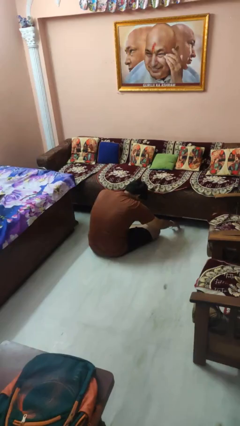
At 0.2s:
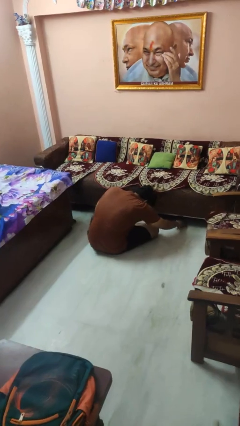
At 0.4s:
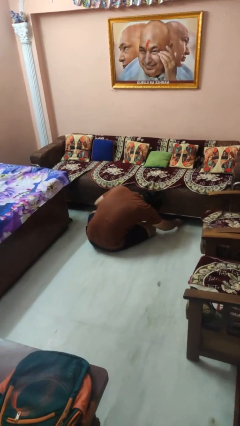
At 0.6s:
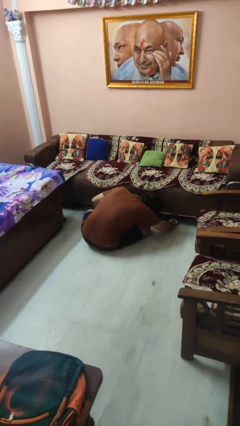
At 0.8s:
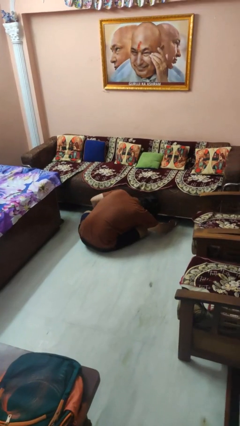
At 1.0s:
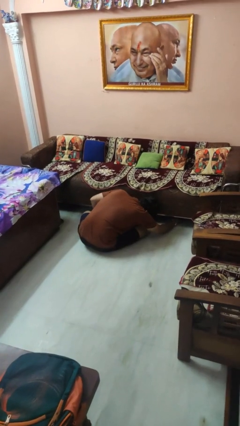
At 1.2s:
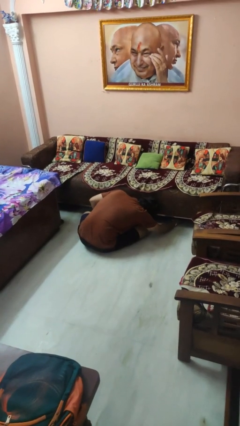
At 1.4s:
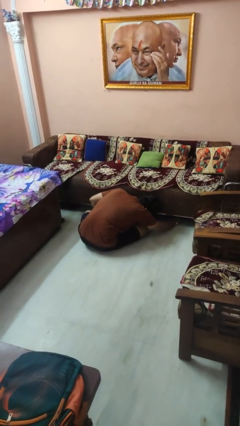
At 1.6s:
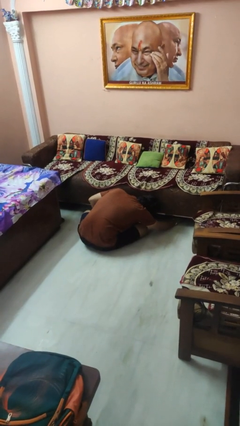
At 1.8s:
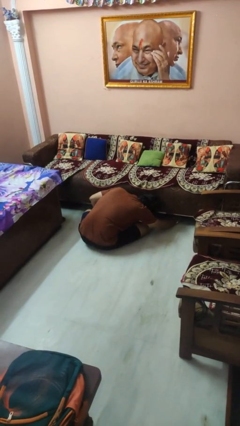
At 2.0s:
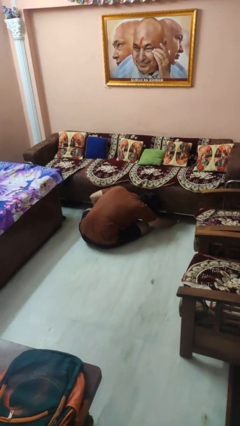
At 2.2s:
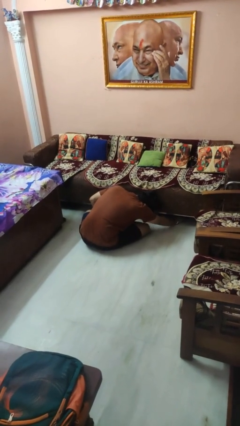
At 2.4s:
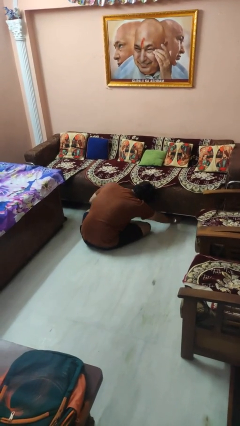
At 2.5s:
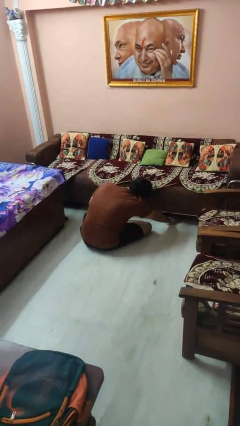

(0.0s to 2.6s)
person searches under couch

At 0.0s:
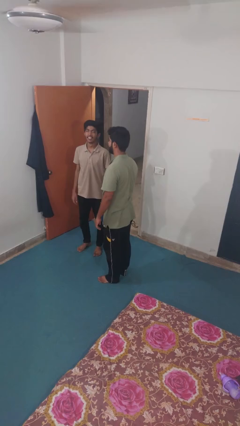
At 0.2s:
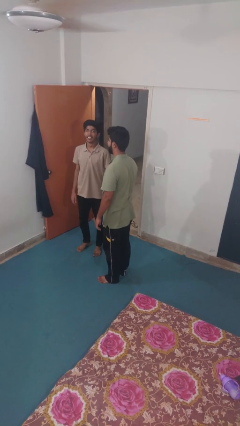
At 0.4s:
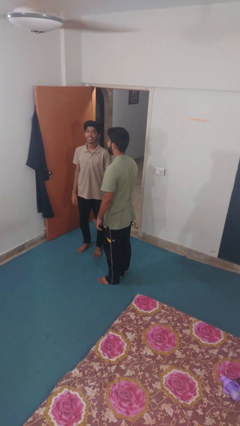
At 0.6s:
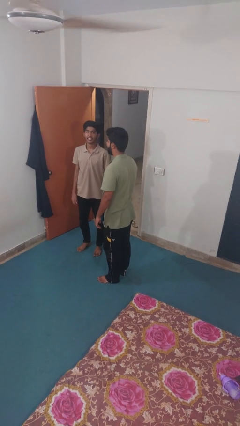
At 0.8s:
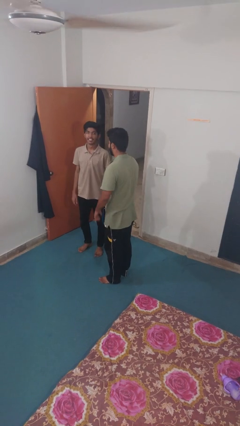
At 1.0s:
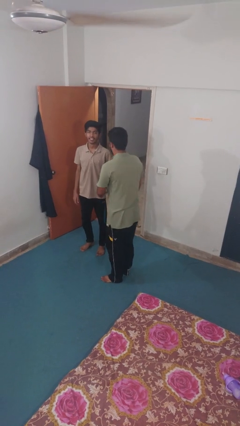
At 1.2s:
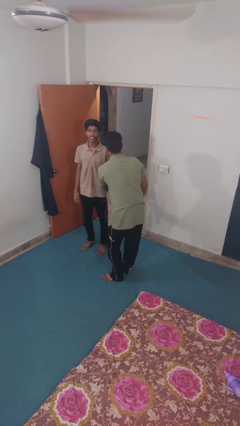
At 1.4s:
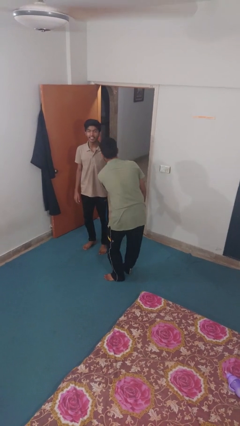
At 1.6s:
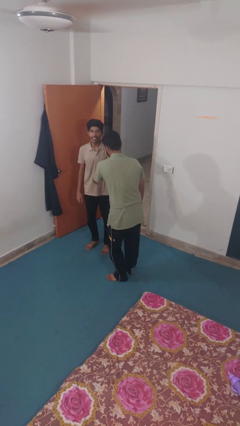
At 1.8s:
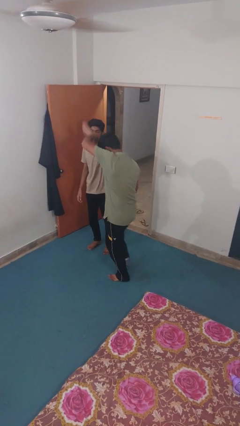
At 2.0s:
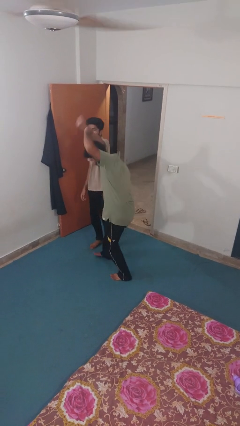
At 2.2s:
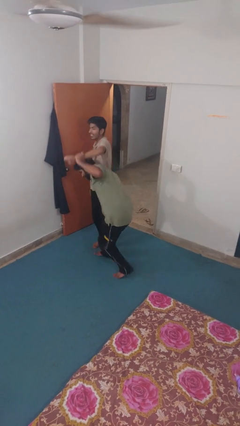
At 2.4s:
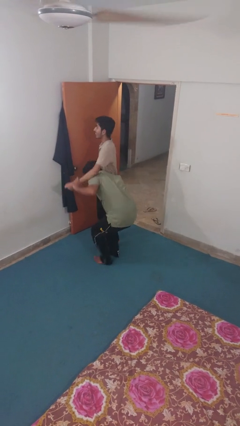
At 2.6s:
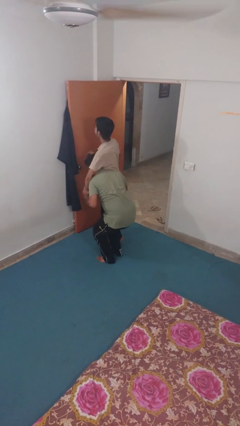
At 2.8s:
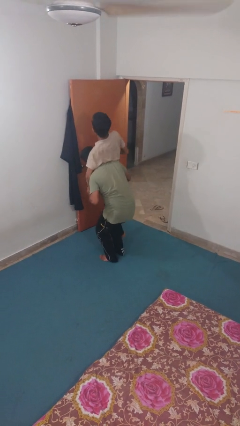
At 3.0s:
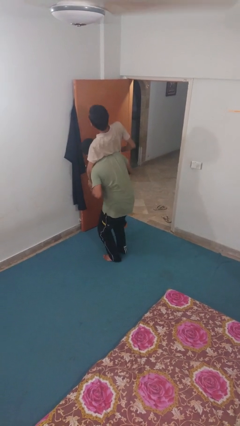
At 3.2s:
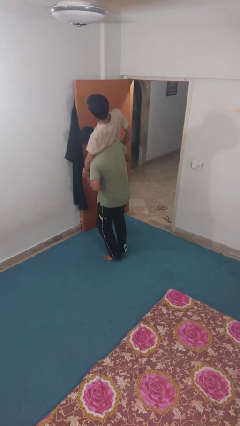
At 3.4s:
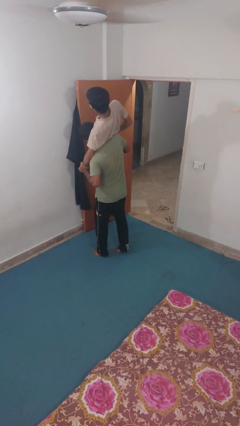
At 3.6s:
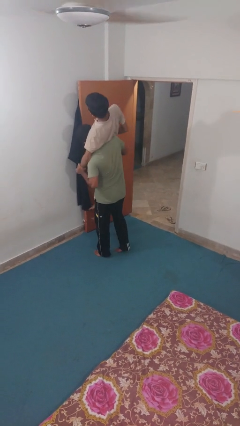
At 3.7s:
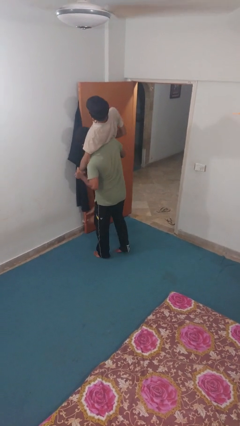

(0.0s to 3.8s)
person carries person over shoulder

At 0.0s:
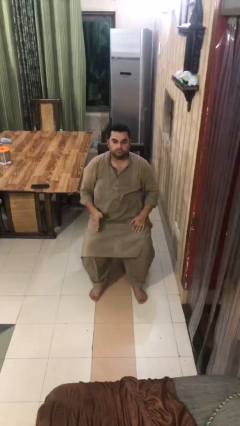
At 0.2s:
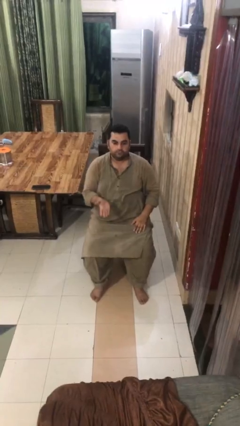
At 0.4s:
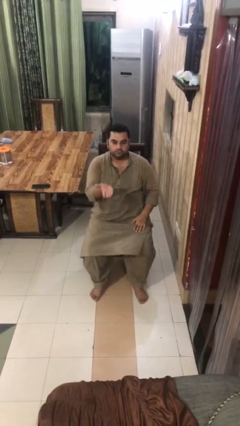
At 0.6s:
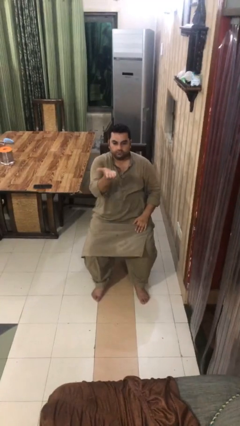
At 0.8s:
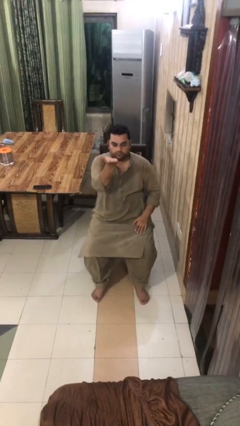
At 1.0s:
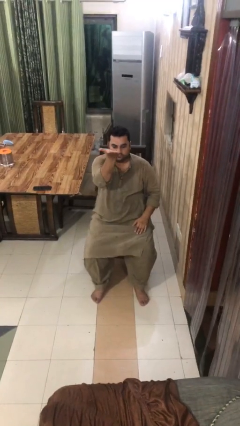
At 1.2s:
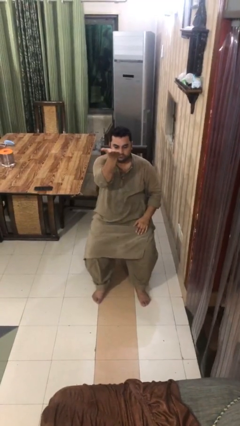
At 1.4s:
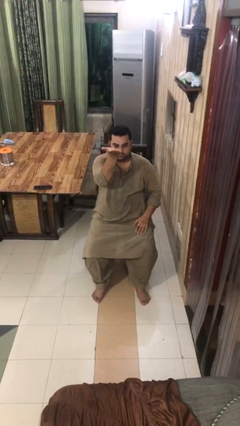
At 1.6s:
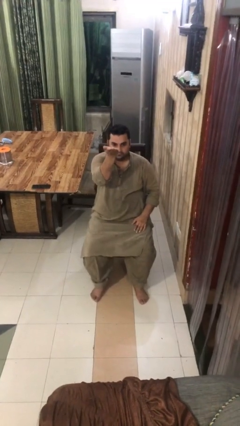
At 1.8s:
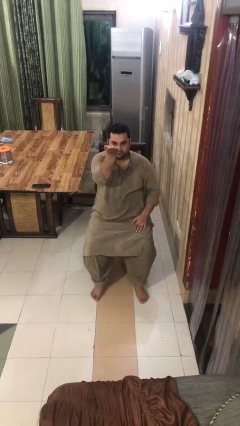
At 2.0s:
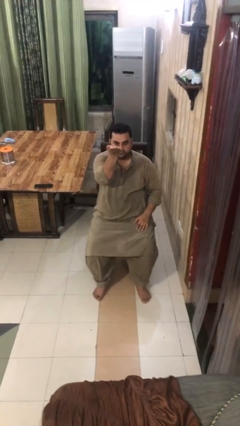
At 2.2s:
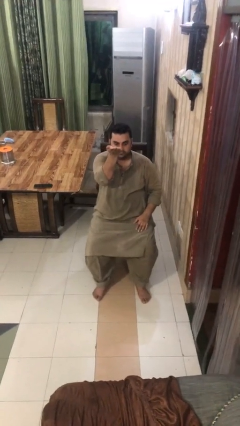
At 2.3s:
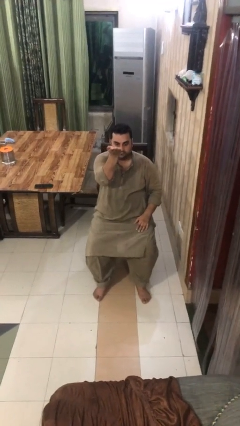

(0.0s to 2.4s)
person gestures swipe up

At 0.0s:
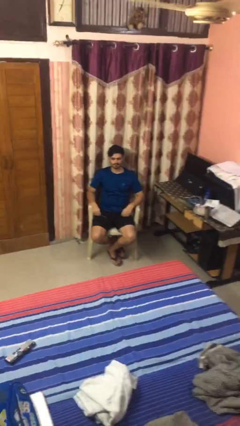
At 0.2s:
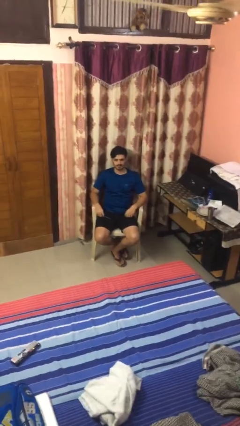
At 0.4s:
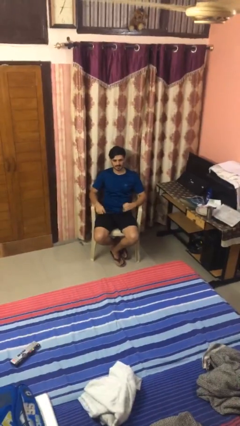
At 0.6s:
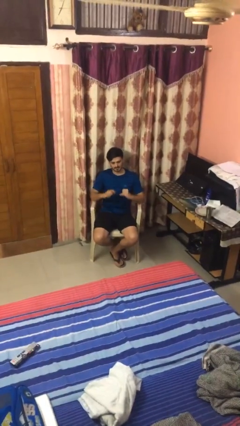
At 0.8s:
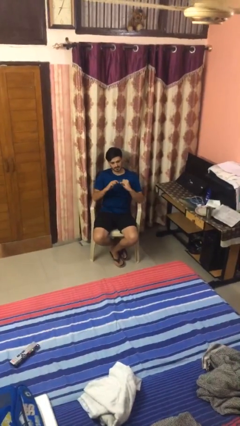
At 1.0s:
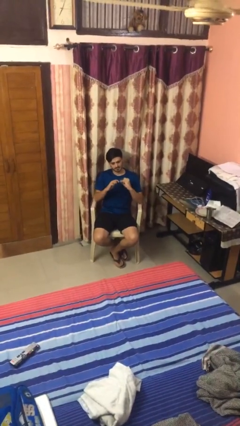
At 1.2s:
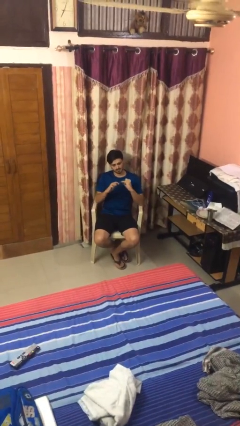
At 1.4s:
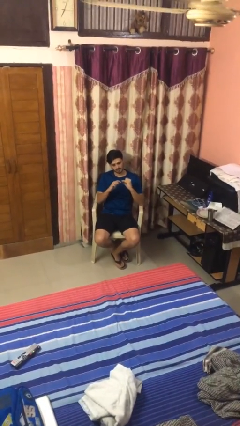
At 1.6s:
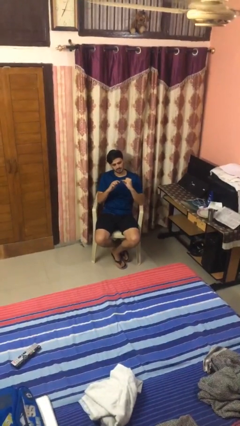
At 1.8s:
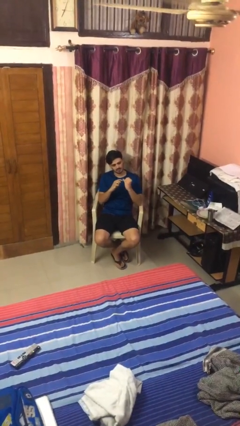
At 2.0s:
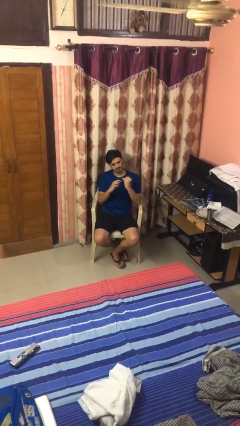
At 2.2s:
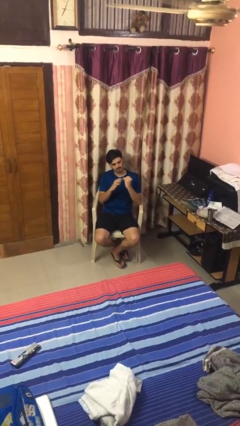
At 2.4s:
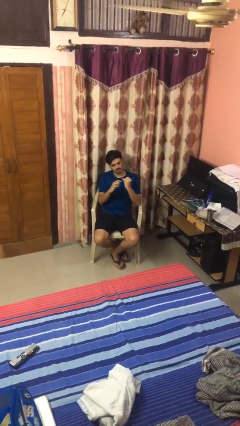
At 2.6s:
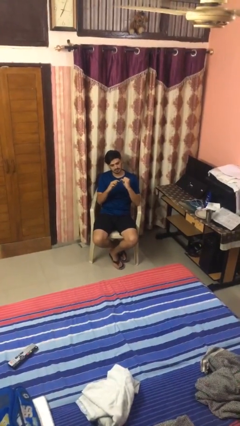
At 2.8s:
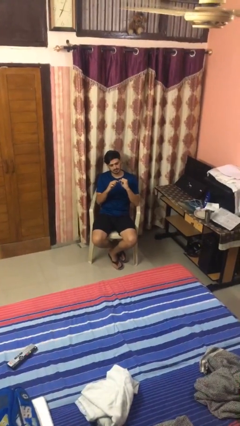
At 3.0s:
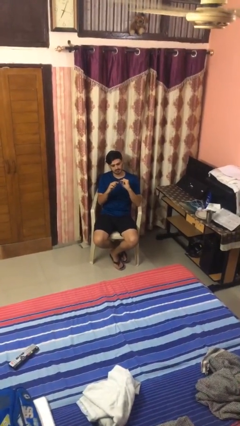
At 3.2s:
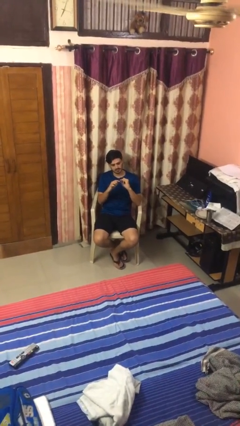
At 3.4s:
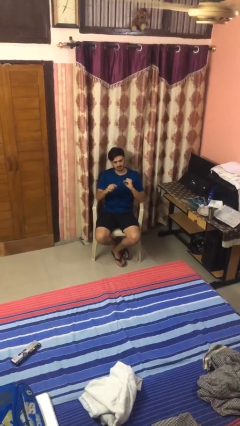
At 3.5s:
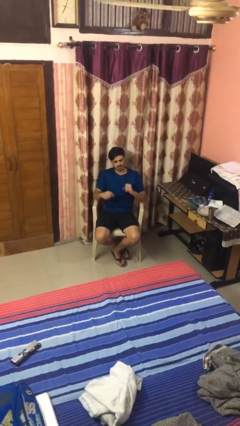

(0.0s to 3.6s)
person files fingernails

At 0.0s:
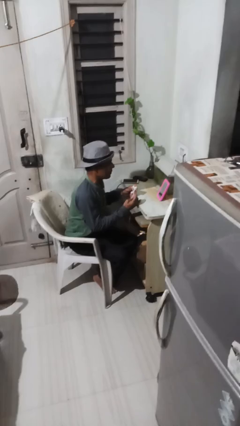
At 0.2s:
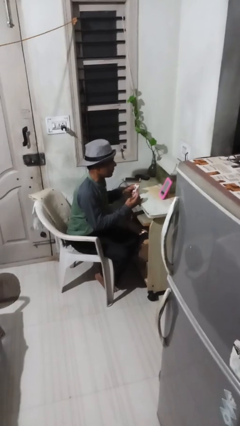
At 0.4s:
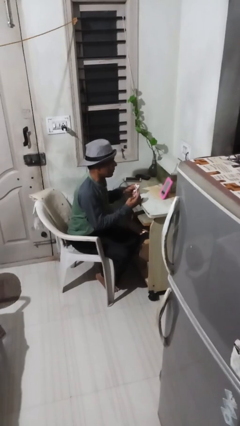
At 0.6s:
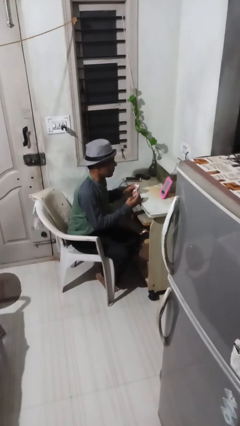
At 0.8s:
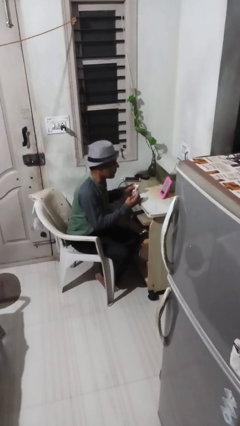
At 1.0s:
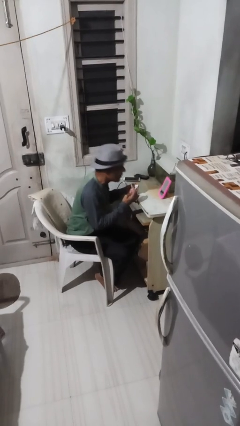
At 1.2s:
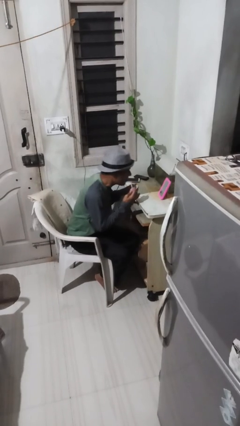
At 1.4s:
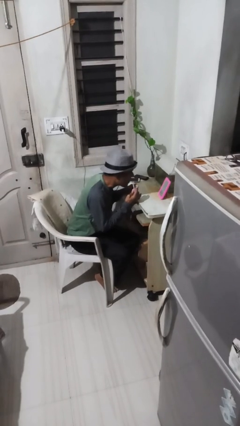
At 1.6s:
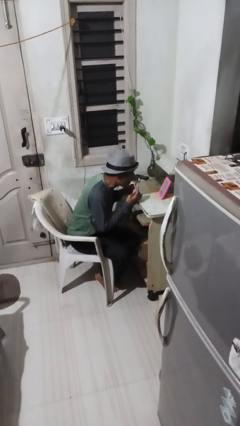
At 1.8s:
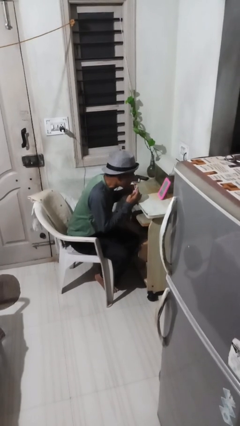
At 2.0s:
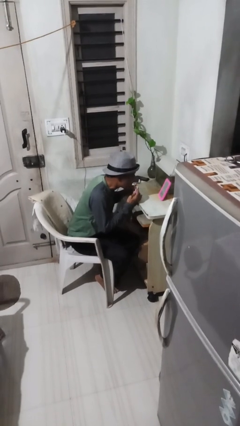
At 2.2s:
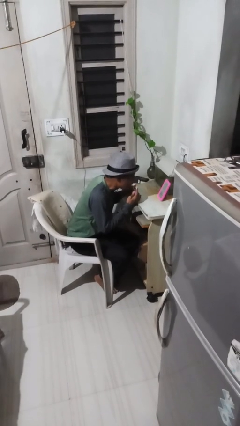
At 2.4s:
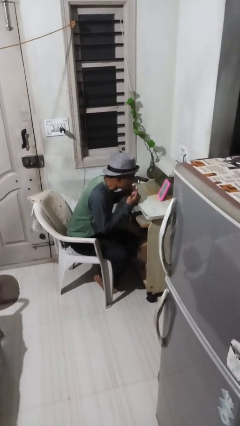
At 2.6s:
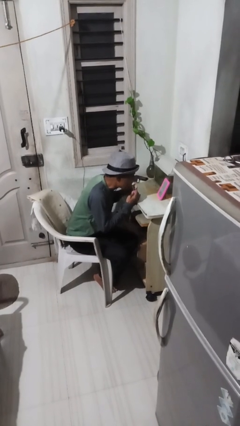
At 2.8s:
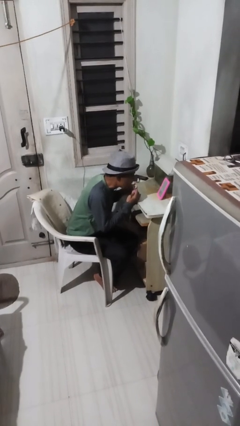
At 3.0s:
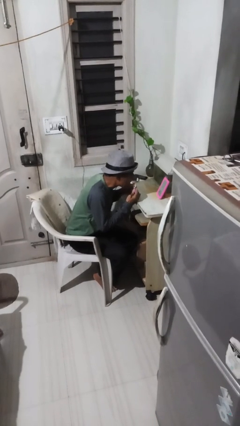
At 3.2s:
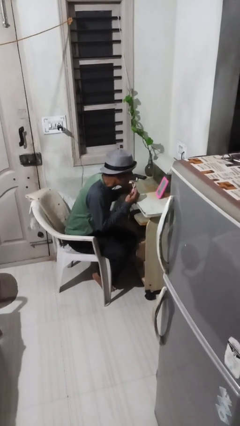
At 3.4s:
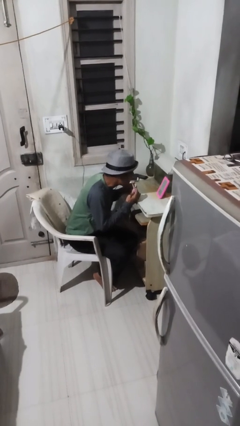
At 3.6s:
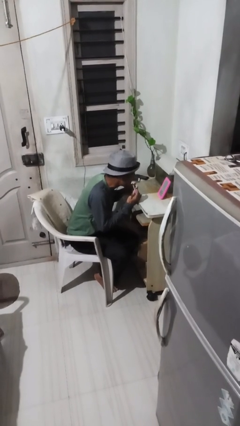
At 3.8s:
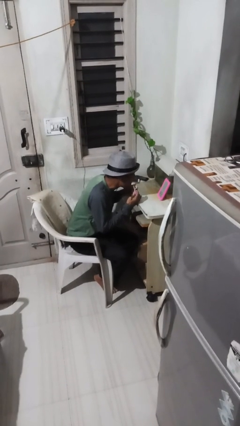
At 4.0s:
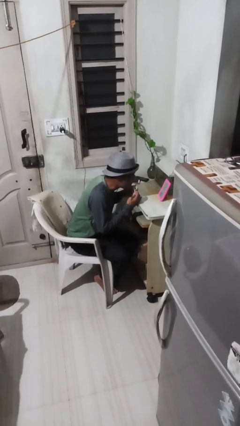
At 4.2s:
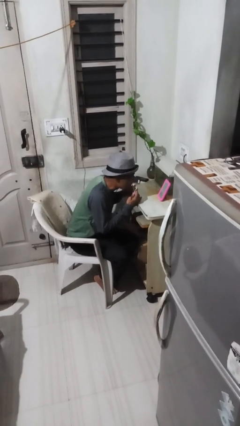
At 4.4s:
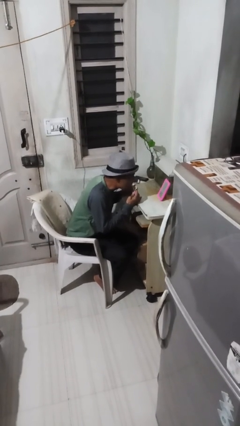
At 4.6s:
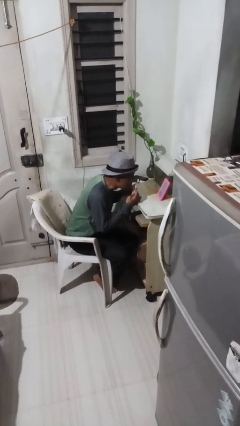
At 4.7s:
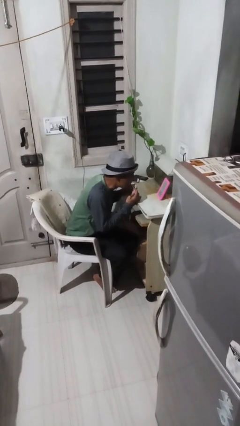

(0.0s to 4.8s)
person applies lip makeup

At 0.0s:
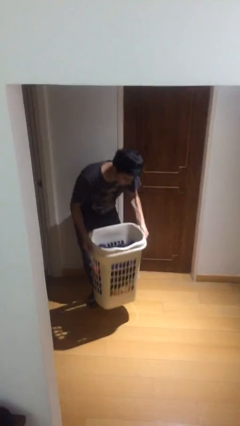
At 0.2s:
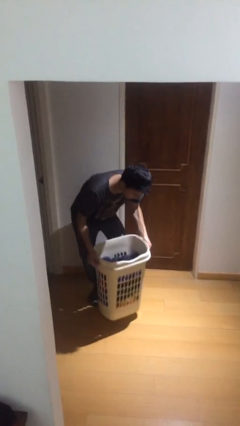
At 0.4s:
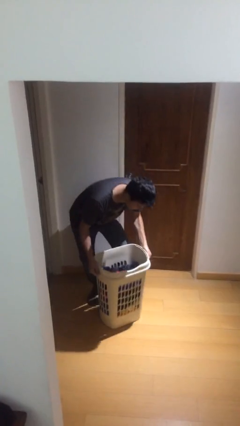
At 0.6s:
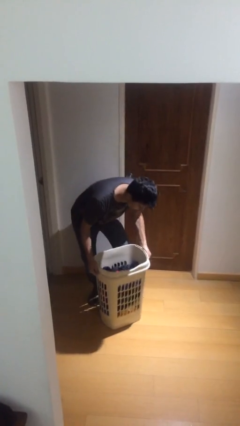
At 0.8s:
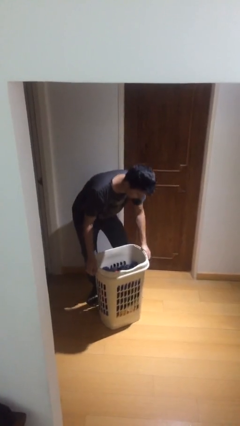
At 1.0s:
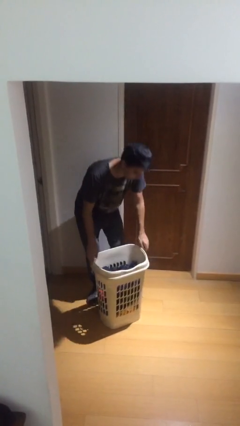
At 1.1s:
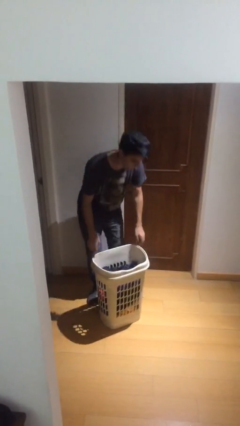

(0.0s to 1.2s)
person puts down object on floor
